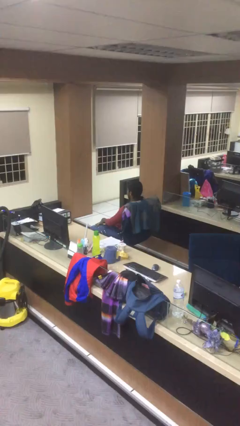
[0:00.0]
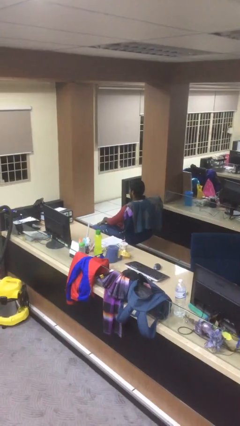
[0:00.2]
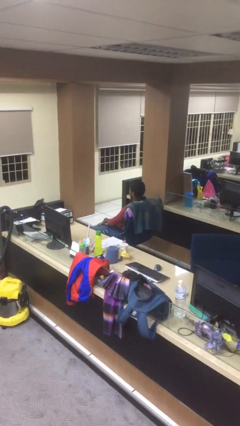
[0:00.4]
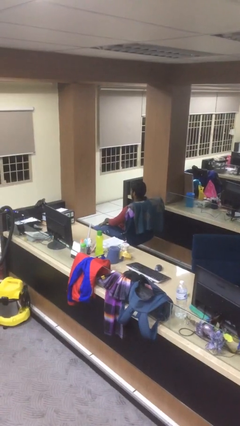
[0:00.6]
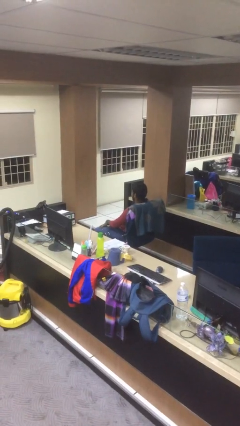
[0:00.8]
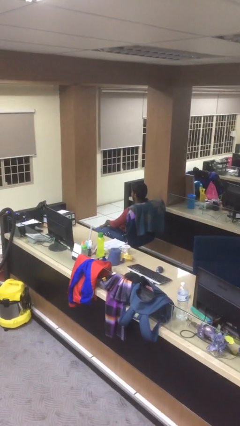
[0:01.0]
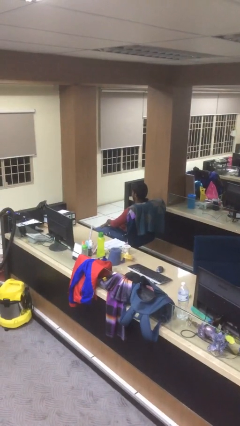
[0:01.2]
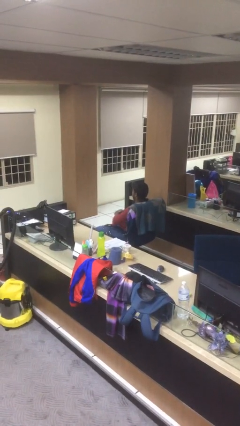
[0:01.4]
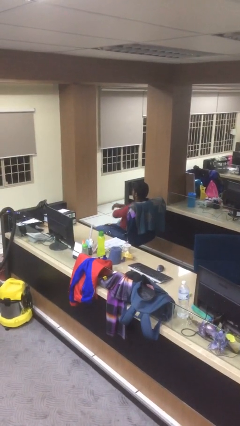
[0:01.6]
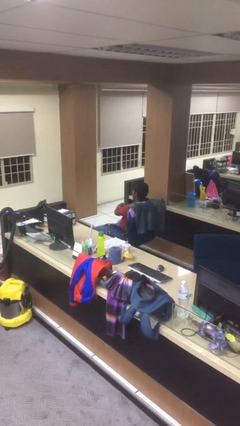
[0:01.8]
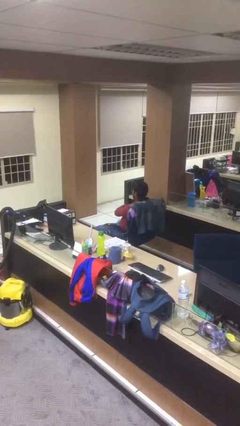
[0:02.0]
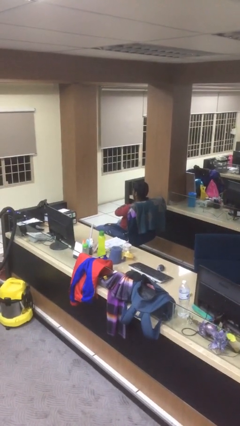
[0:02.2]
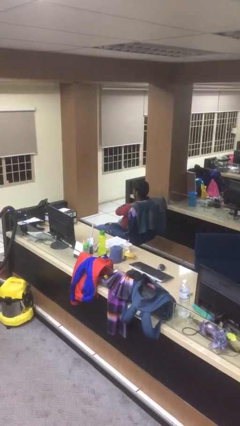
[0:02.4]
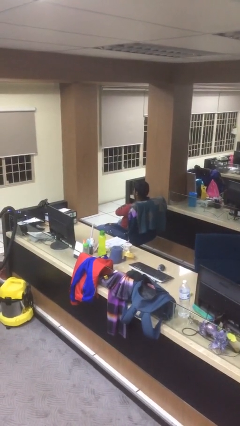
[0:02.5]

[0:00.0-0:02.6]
person crosses arms

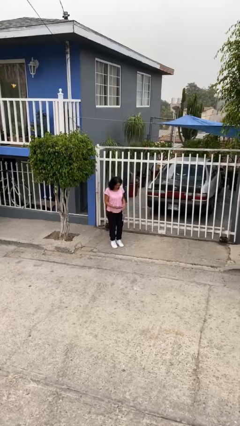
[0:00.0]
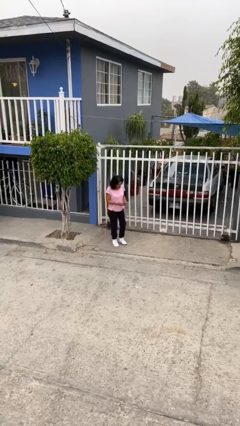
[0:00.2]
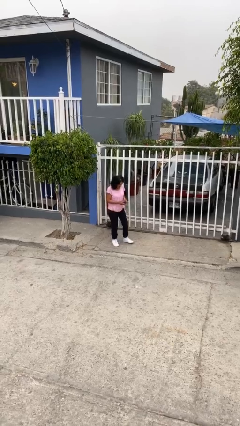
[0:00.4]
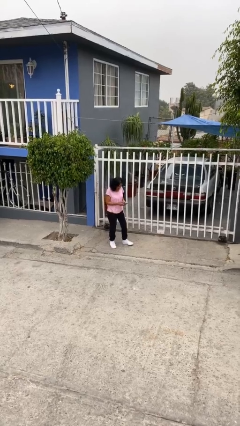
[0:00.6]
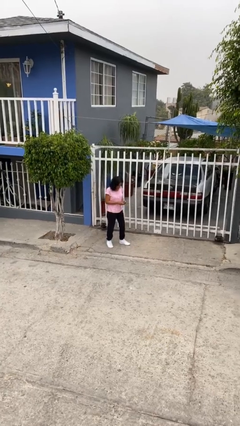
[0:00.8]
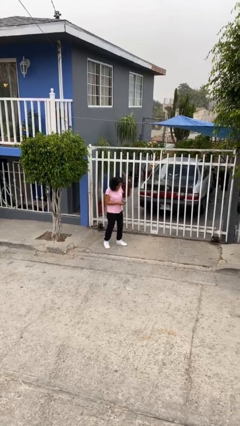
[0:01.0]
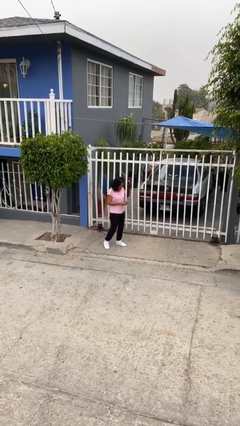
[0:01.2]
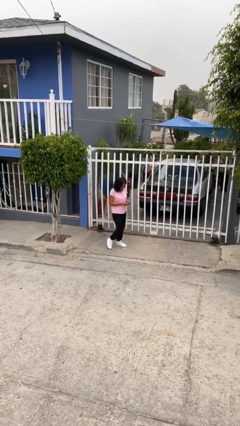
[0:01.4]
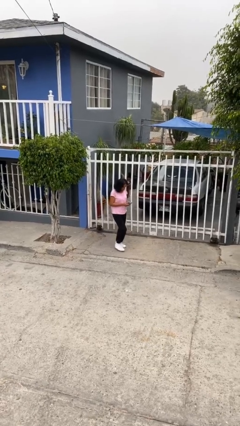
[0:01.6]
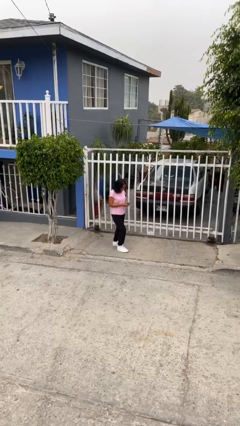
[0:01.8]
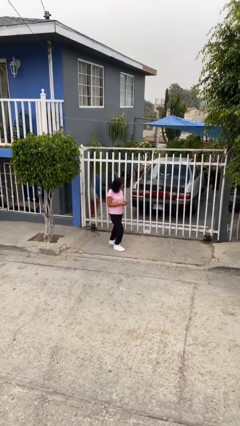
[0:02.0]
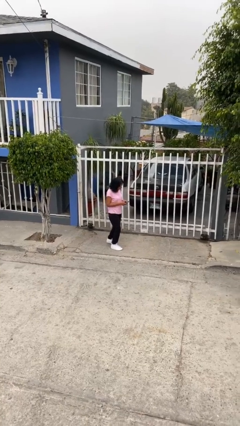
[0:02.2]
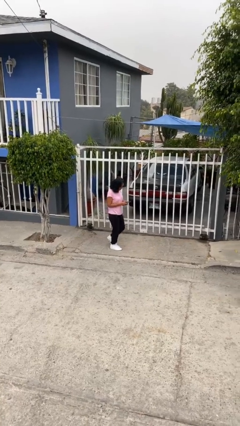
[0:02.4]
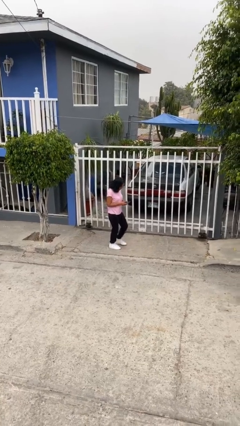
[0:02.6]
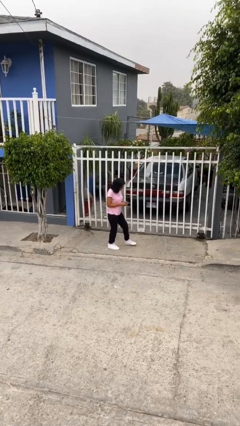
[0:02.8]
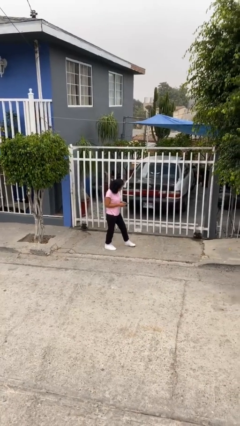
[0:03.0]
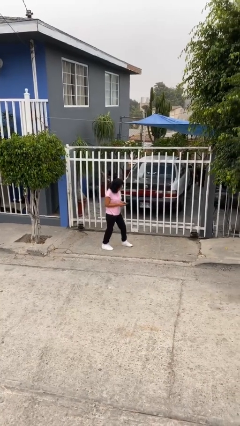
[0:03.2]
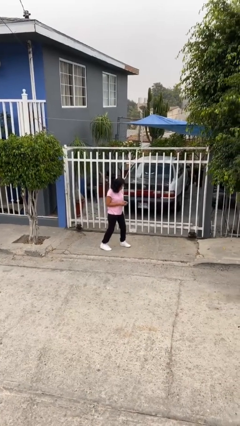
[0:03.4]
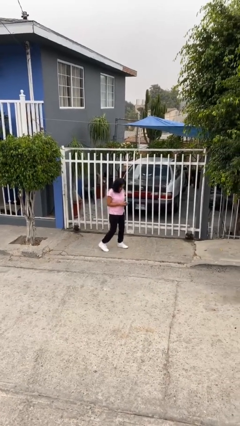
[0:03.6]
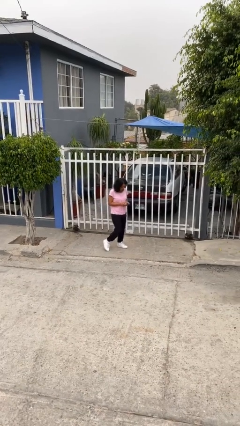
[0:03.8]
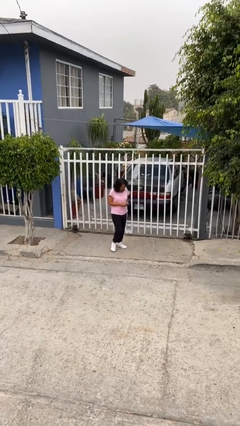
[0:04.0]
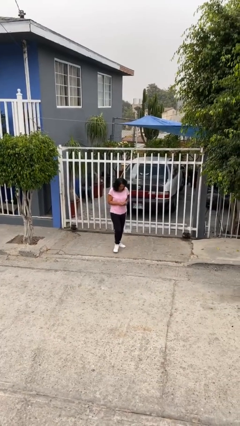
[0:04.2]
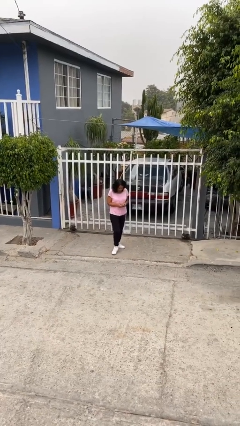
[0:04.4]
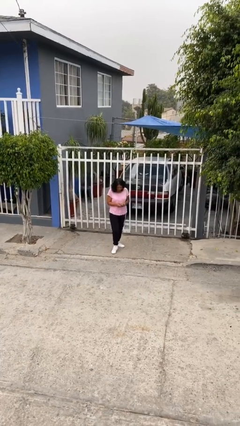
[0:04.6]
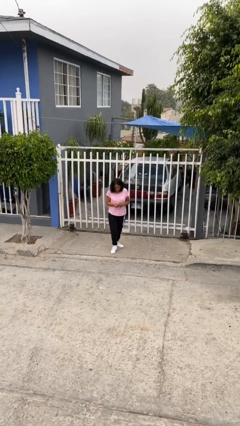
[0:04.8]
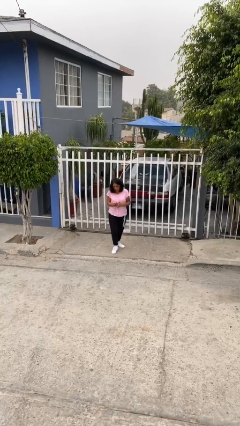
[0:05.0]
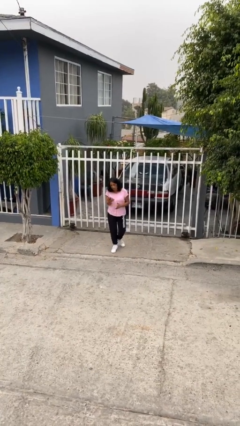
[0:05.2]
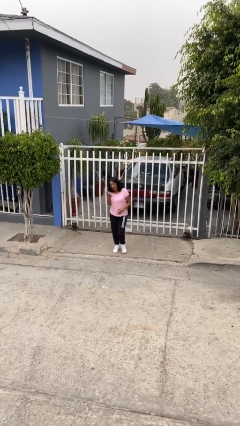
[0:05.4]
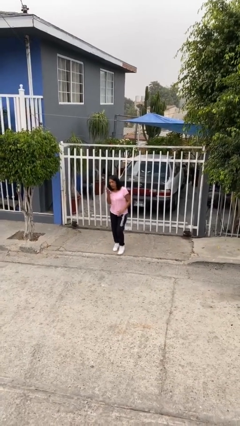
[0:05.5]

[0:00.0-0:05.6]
person texts on phone

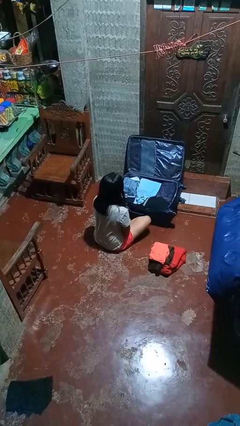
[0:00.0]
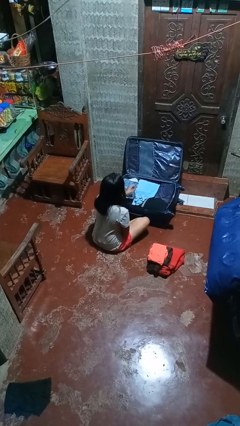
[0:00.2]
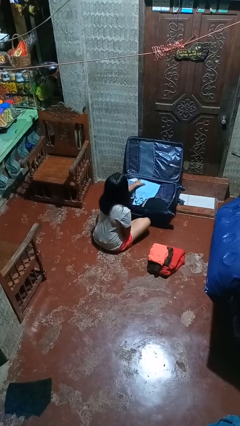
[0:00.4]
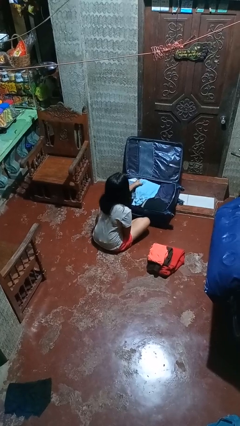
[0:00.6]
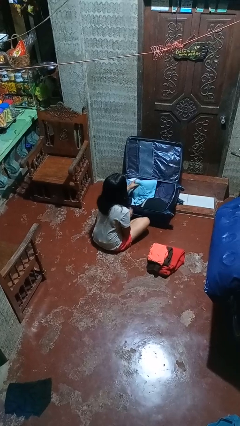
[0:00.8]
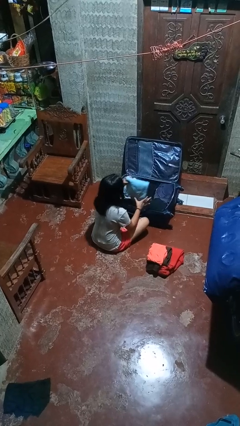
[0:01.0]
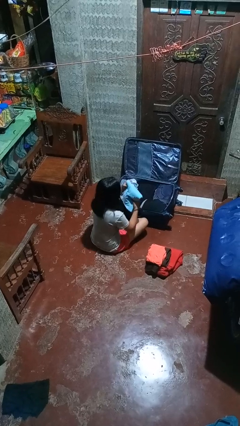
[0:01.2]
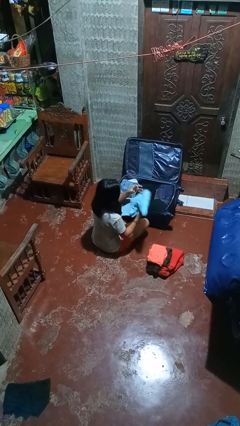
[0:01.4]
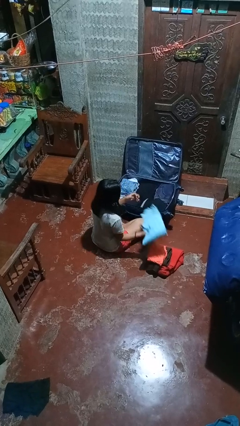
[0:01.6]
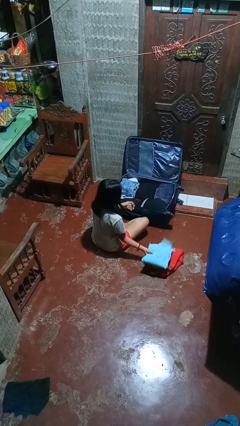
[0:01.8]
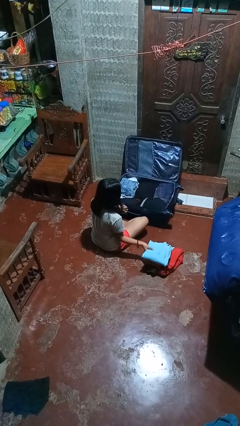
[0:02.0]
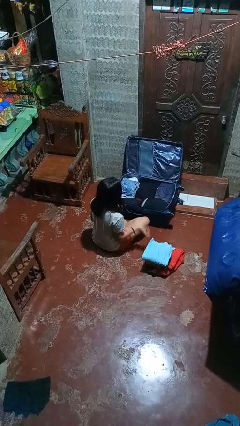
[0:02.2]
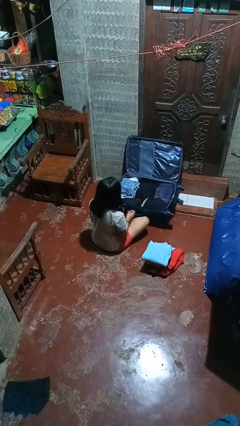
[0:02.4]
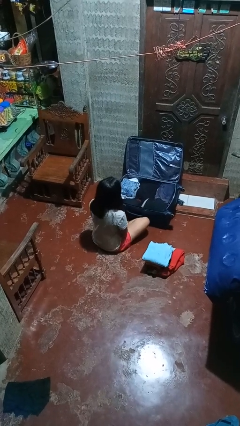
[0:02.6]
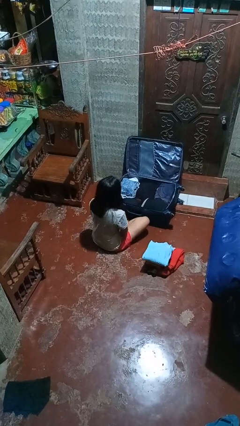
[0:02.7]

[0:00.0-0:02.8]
person unloads clothes from suitcase

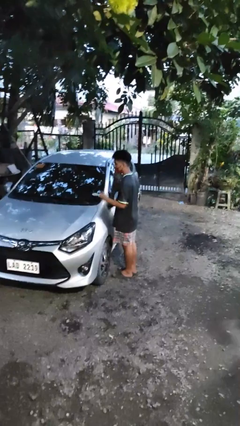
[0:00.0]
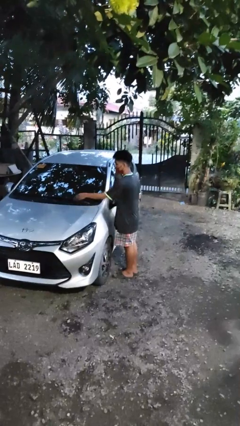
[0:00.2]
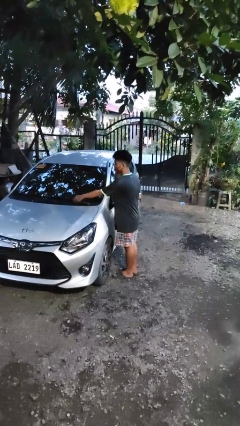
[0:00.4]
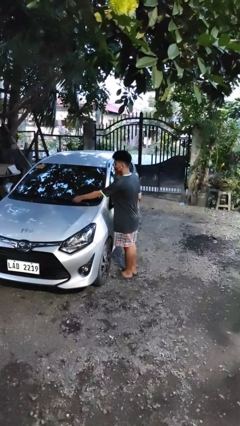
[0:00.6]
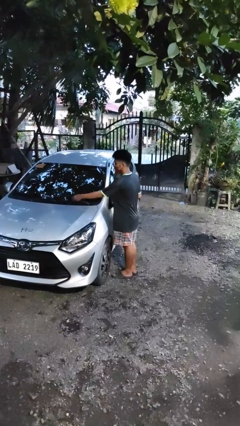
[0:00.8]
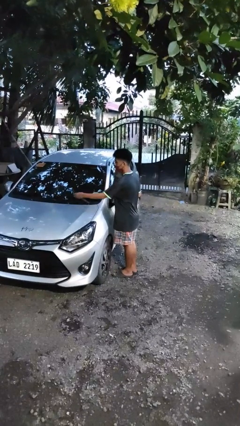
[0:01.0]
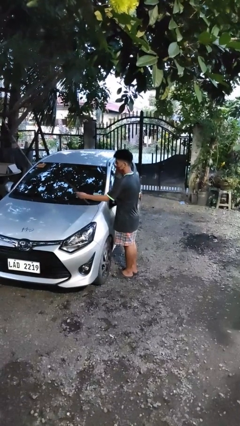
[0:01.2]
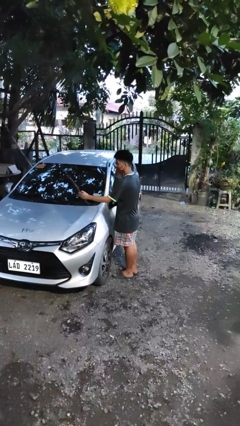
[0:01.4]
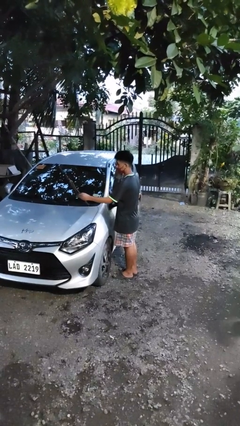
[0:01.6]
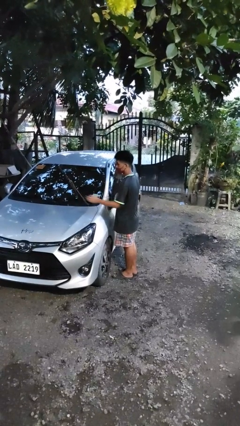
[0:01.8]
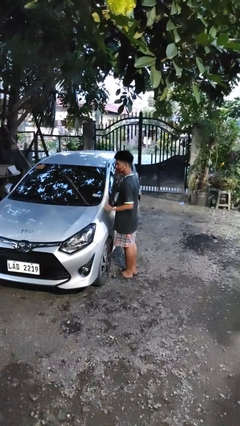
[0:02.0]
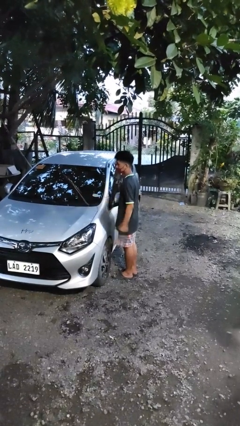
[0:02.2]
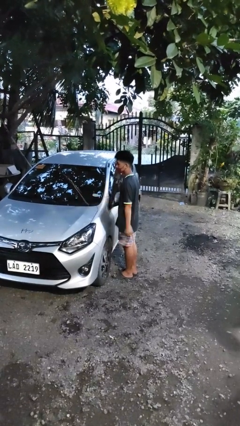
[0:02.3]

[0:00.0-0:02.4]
person flips up car wipers

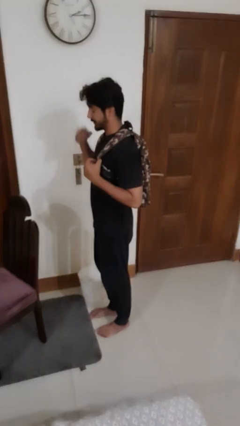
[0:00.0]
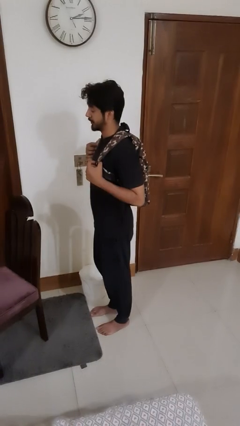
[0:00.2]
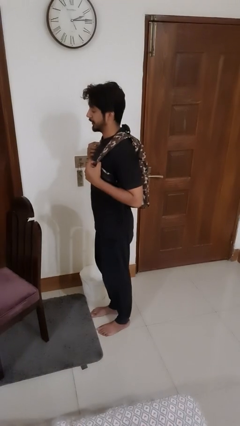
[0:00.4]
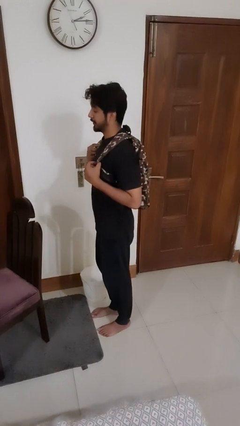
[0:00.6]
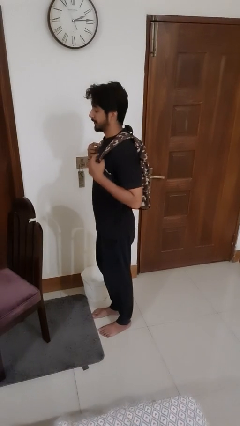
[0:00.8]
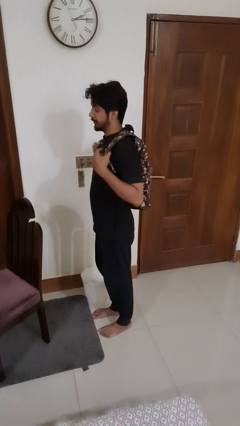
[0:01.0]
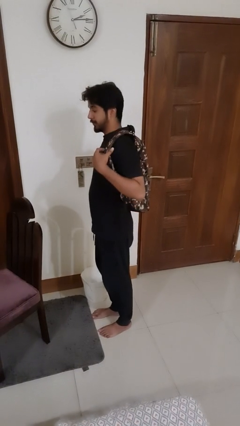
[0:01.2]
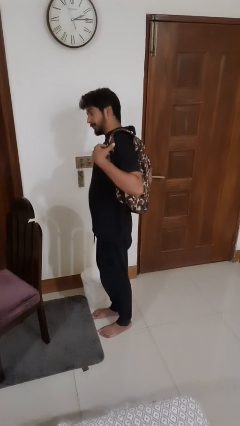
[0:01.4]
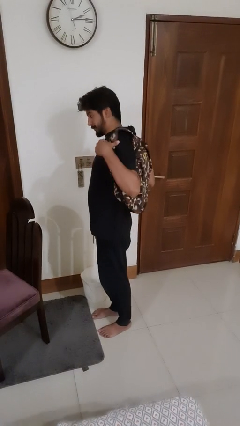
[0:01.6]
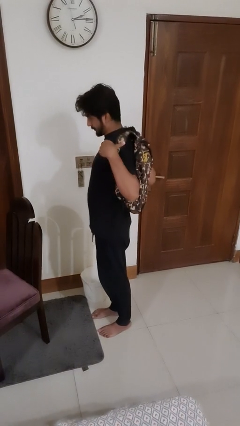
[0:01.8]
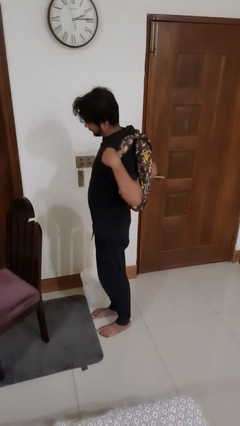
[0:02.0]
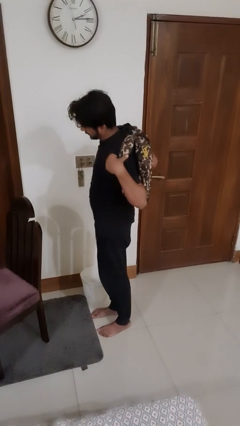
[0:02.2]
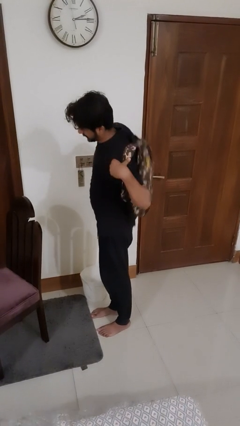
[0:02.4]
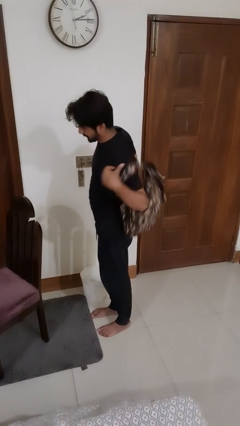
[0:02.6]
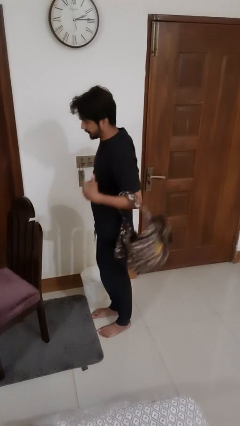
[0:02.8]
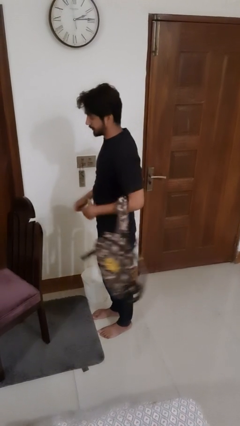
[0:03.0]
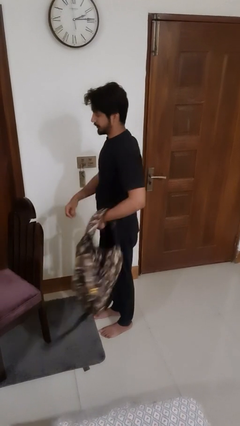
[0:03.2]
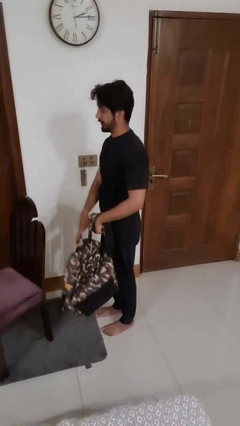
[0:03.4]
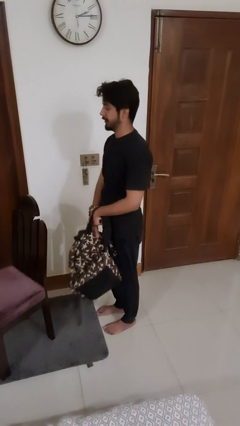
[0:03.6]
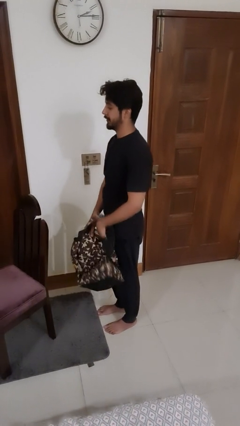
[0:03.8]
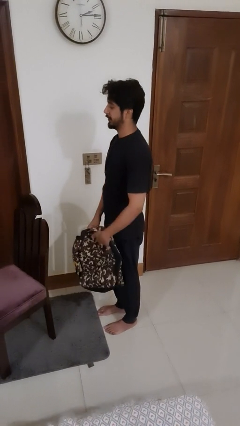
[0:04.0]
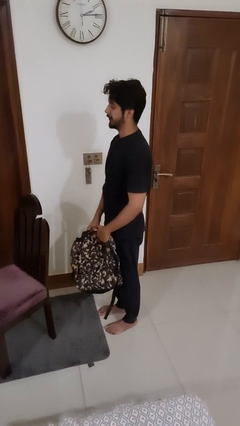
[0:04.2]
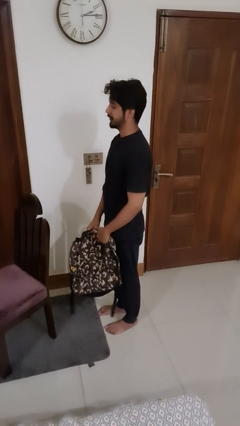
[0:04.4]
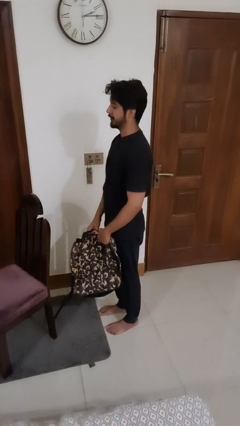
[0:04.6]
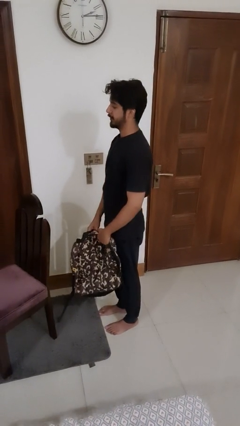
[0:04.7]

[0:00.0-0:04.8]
person takes off backpack
